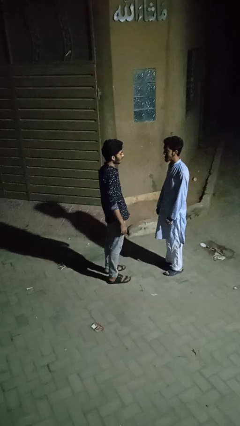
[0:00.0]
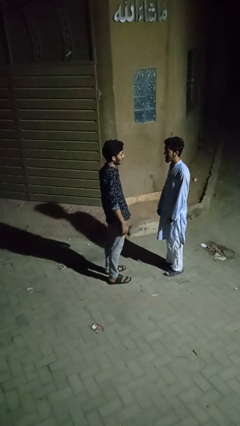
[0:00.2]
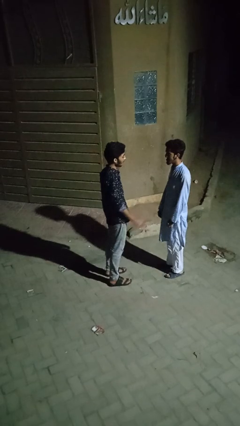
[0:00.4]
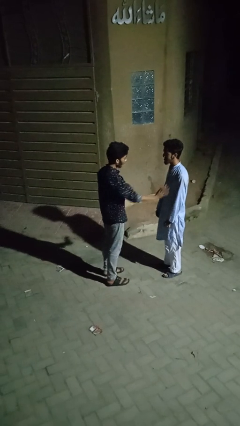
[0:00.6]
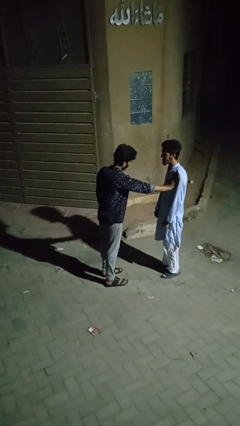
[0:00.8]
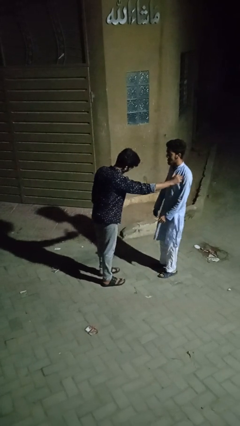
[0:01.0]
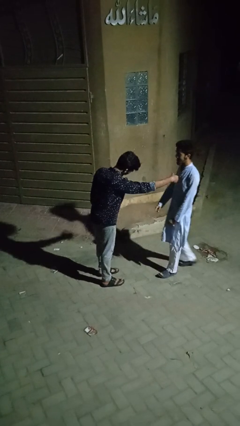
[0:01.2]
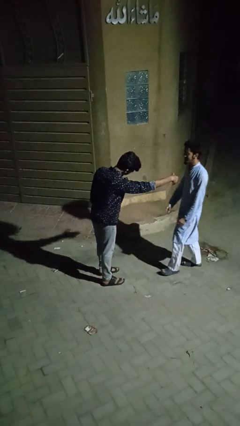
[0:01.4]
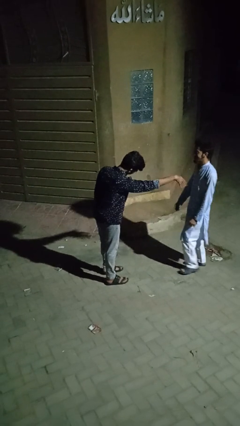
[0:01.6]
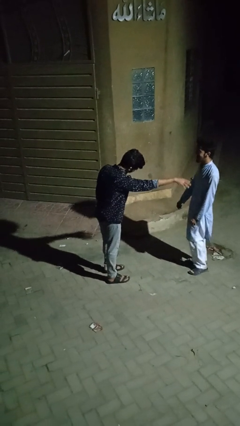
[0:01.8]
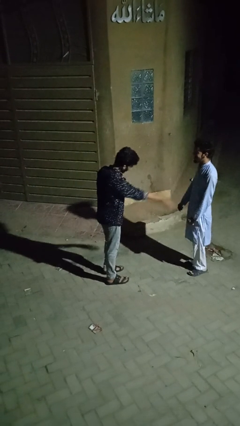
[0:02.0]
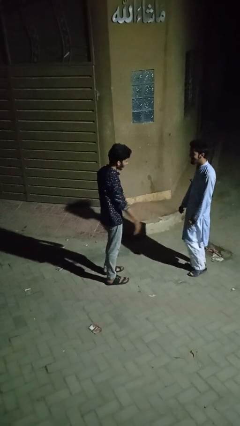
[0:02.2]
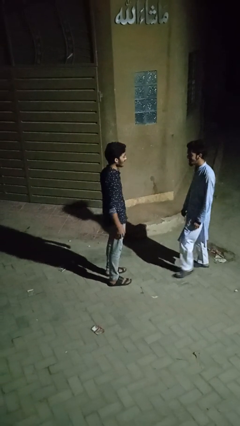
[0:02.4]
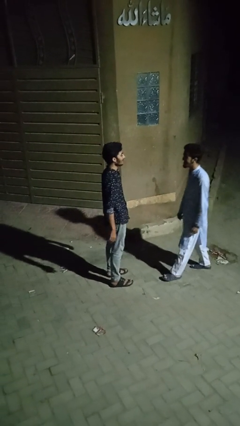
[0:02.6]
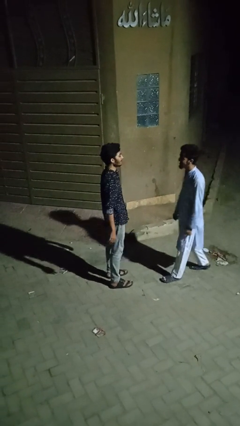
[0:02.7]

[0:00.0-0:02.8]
person shoves person

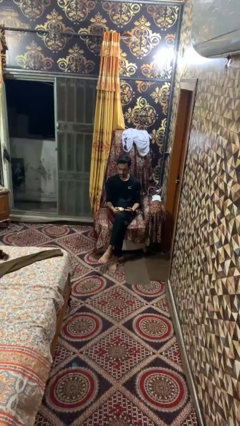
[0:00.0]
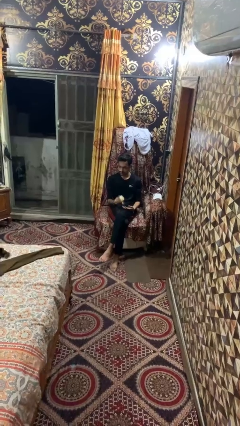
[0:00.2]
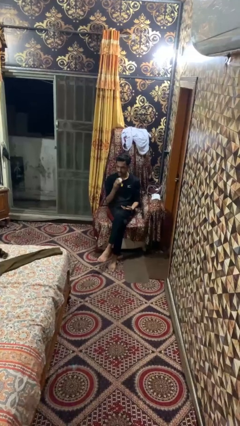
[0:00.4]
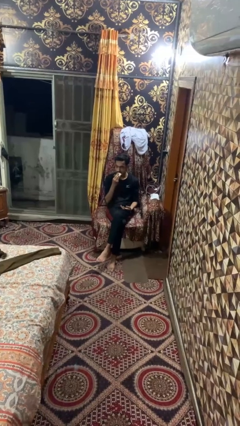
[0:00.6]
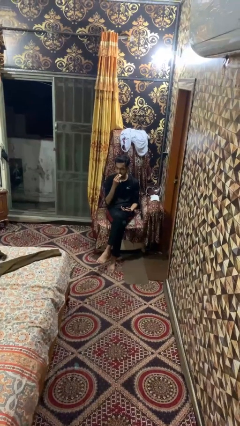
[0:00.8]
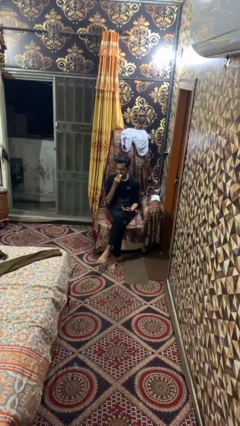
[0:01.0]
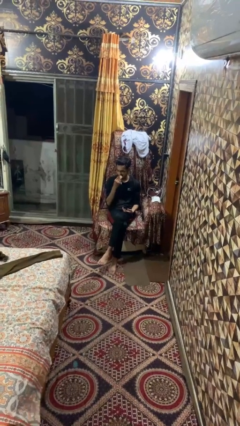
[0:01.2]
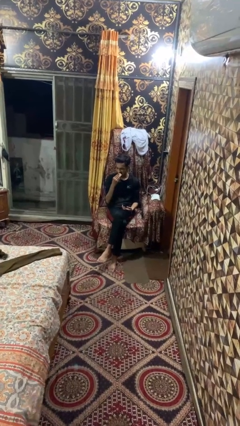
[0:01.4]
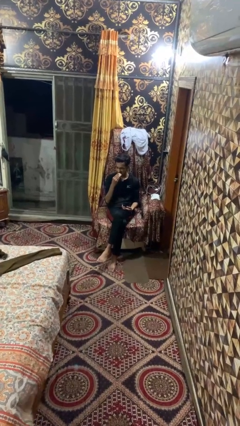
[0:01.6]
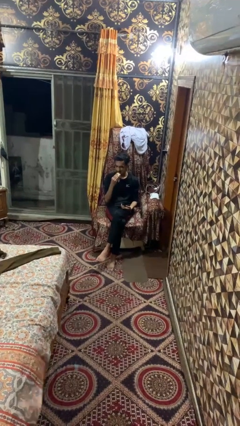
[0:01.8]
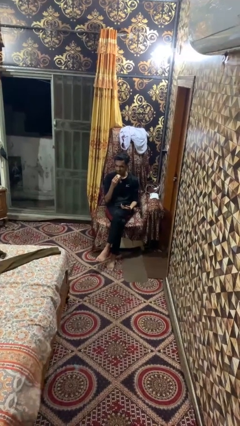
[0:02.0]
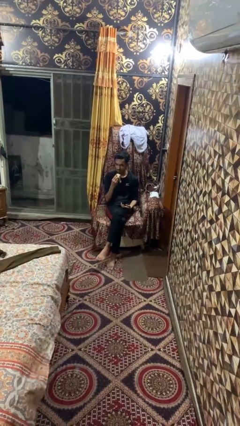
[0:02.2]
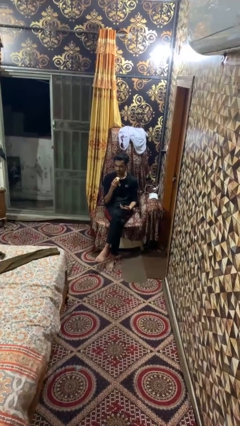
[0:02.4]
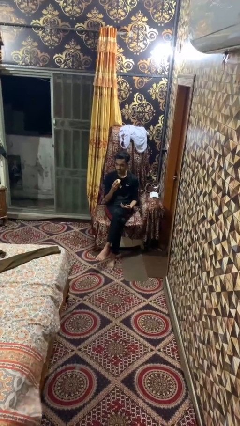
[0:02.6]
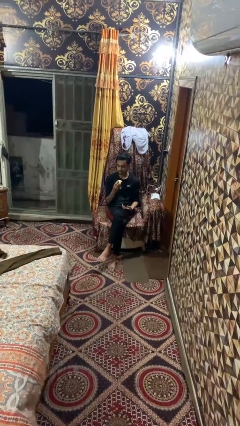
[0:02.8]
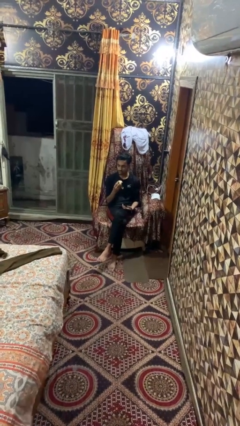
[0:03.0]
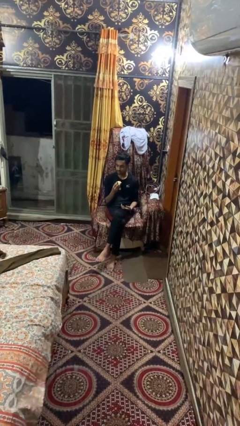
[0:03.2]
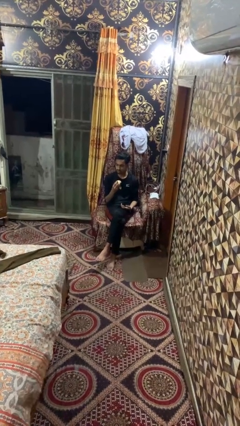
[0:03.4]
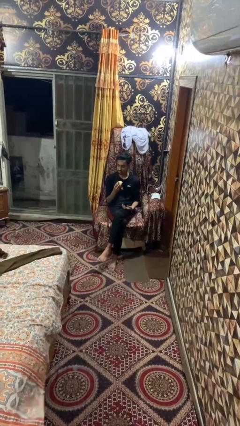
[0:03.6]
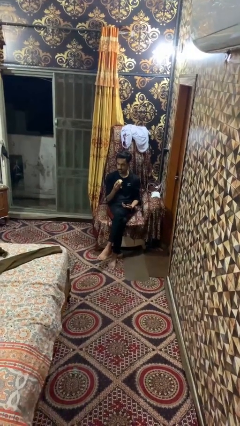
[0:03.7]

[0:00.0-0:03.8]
person eats banana

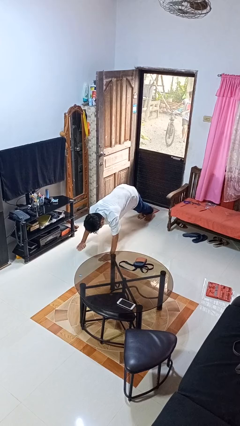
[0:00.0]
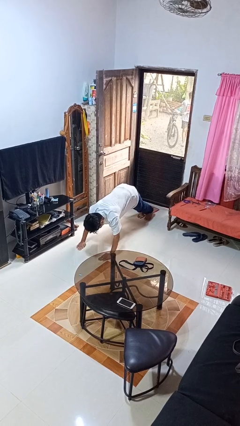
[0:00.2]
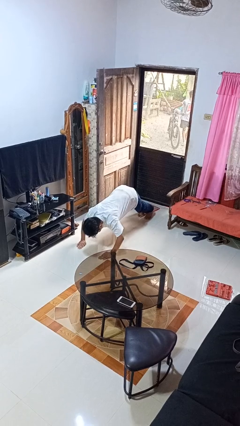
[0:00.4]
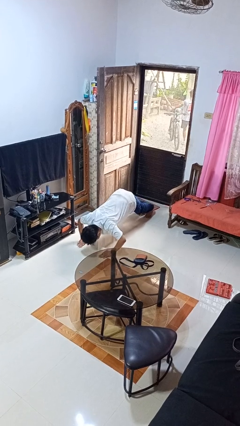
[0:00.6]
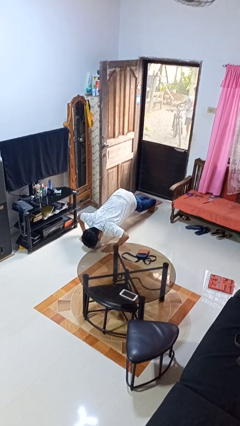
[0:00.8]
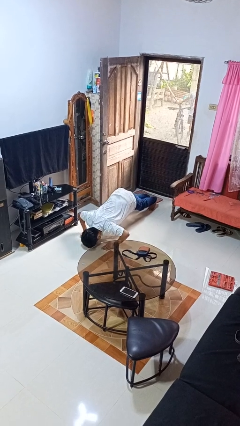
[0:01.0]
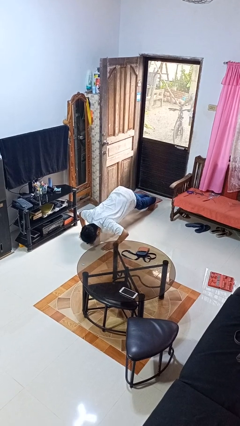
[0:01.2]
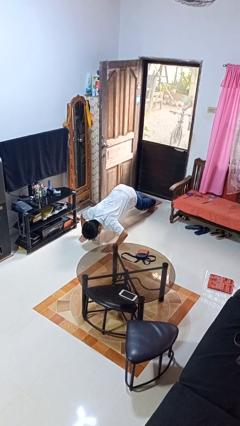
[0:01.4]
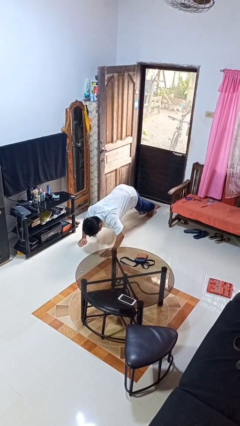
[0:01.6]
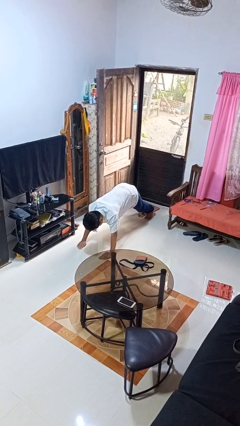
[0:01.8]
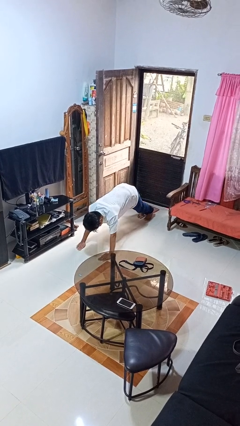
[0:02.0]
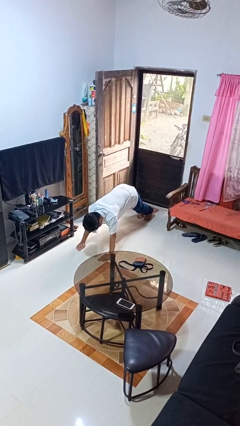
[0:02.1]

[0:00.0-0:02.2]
person exercises with pushup

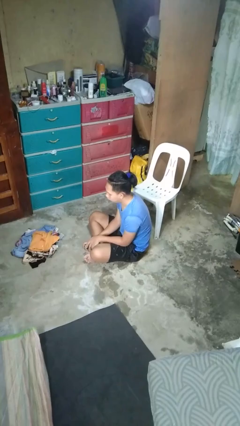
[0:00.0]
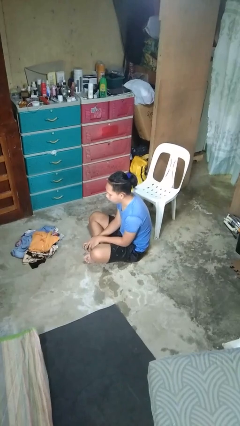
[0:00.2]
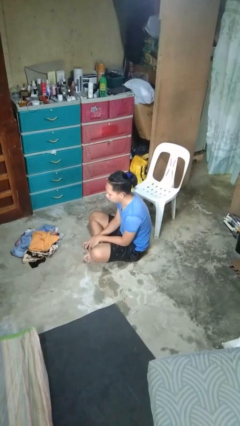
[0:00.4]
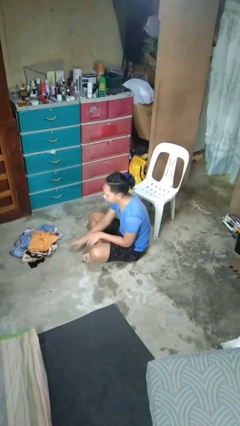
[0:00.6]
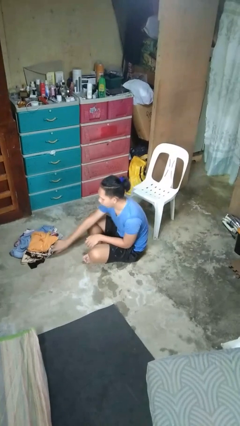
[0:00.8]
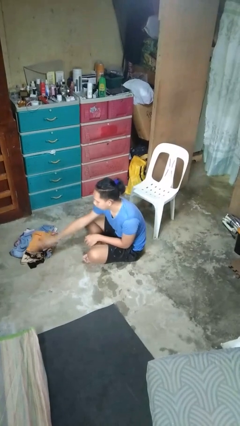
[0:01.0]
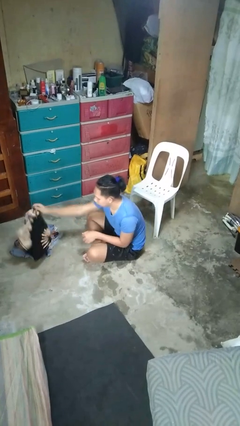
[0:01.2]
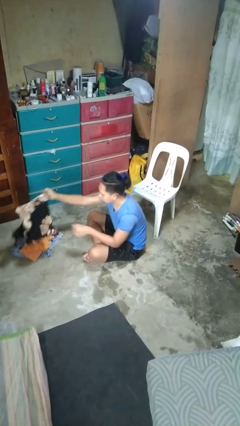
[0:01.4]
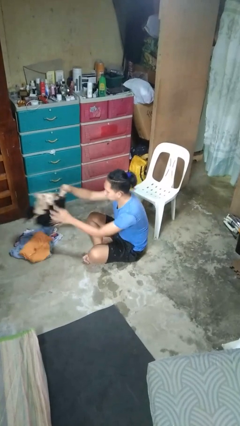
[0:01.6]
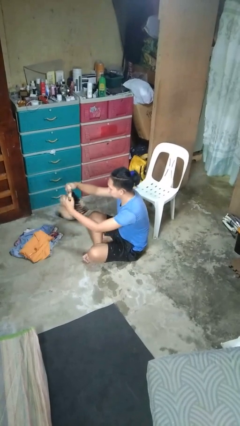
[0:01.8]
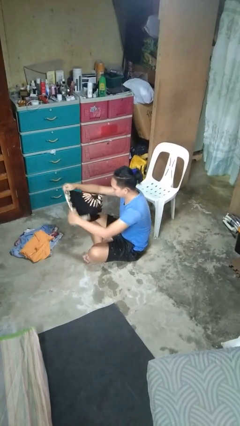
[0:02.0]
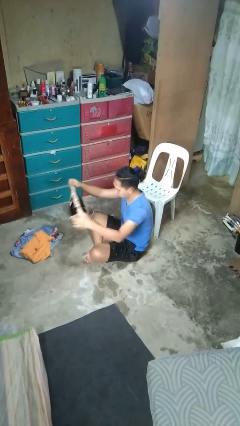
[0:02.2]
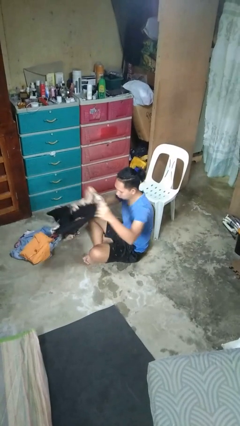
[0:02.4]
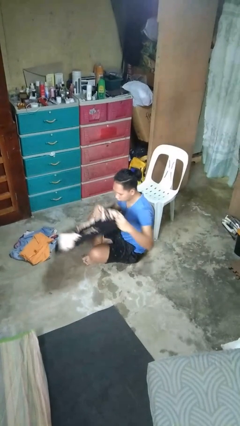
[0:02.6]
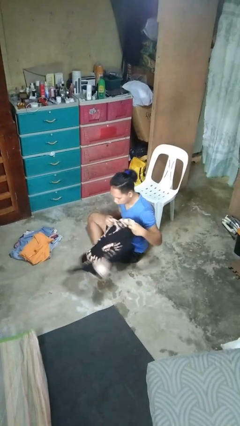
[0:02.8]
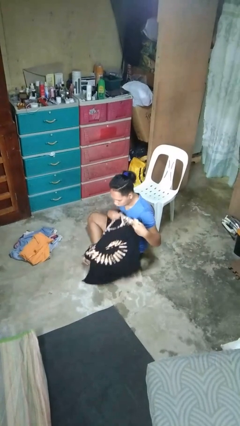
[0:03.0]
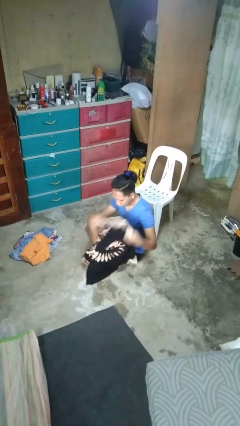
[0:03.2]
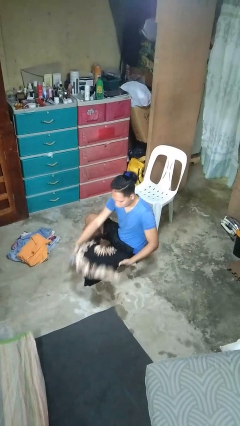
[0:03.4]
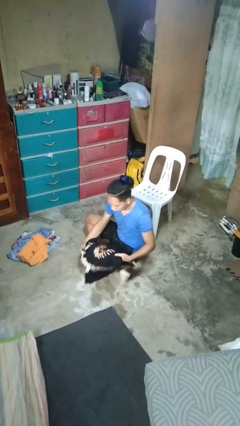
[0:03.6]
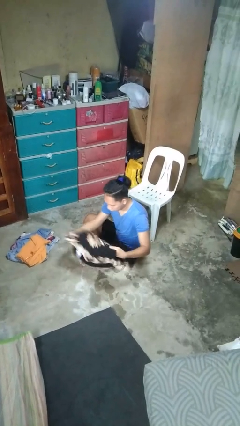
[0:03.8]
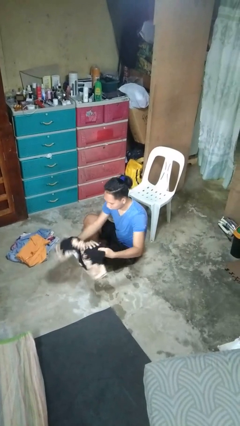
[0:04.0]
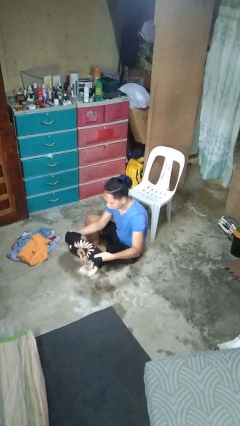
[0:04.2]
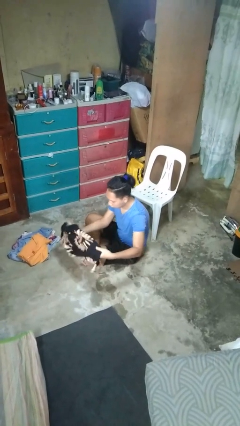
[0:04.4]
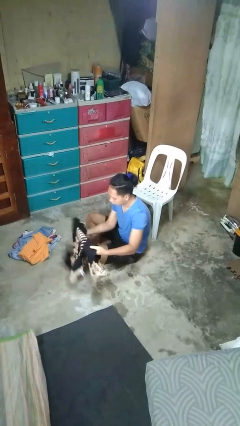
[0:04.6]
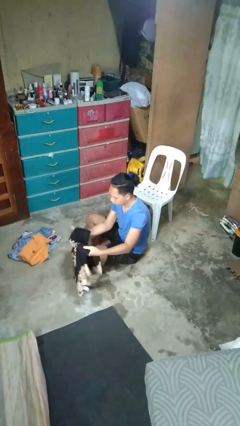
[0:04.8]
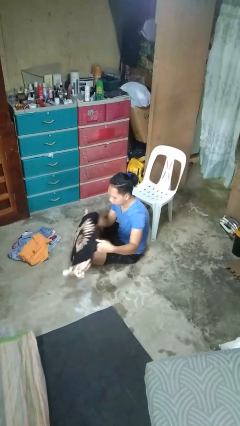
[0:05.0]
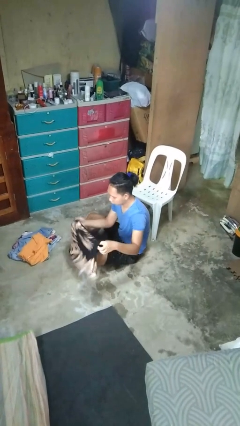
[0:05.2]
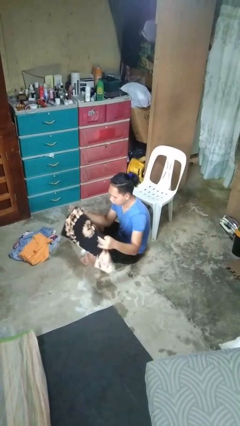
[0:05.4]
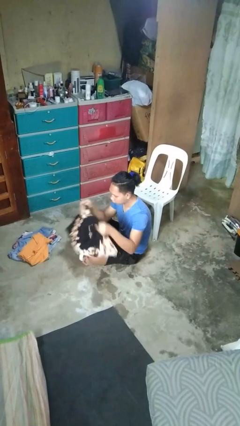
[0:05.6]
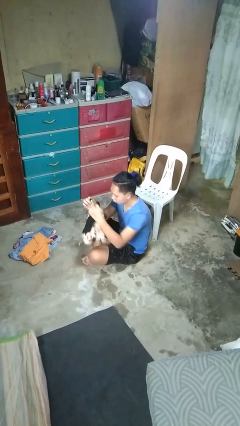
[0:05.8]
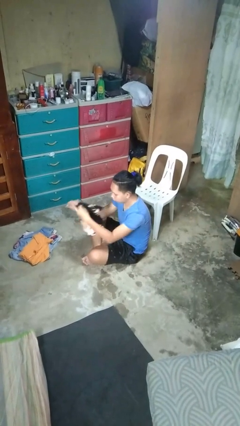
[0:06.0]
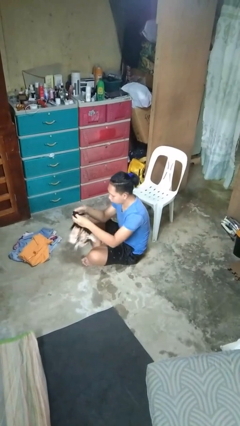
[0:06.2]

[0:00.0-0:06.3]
person folds shirt

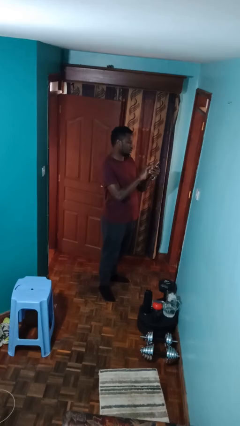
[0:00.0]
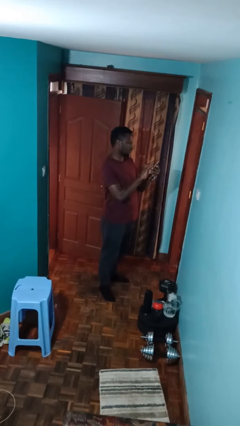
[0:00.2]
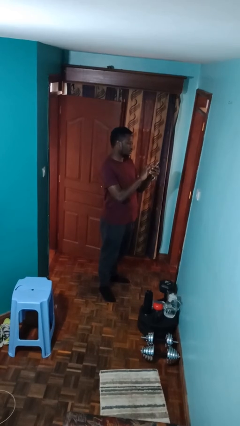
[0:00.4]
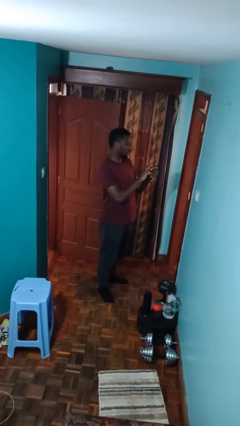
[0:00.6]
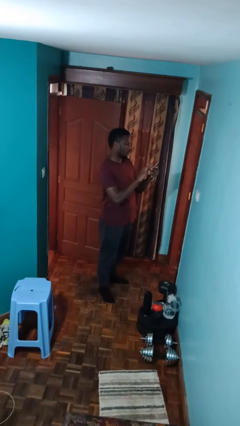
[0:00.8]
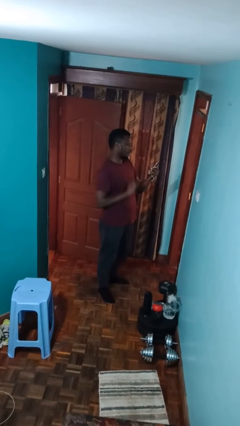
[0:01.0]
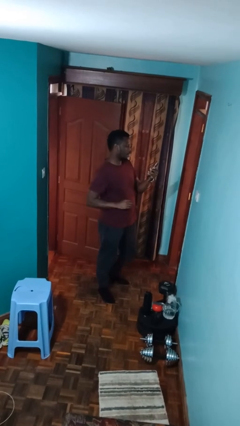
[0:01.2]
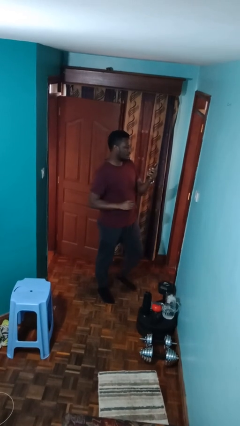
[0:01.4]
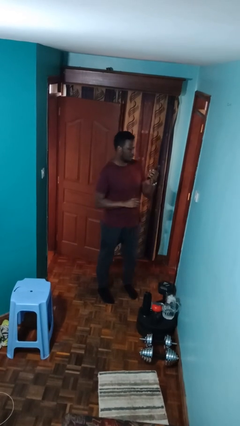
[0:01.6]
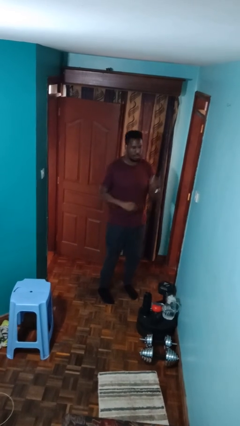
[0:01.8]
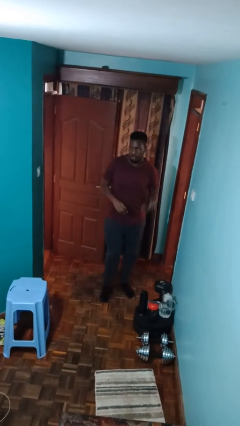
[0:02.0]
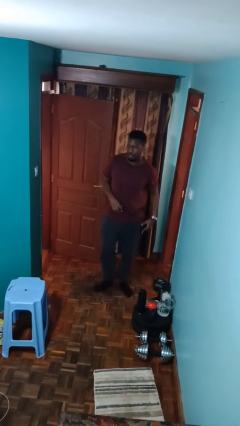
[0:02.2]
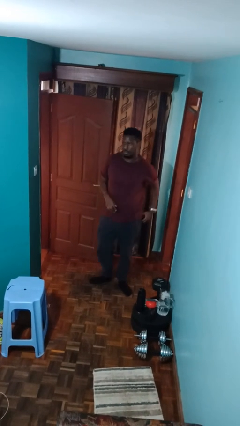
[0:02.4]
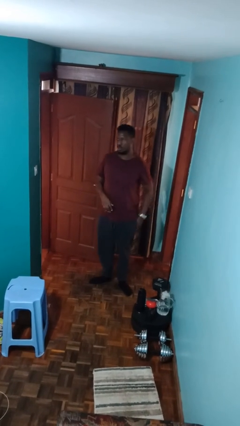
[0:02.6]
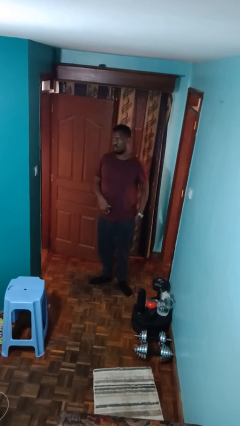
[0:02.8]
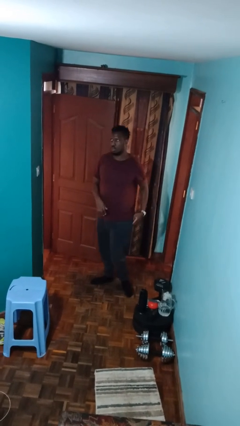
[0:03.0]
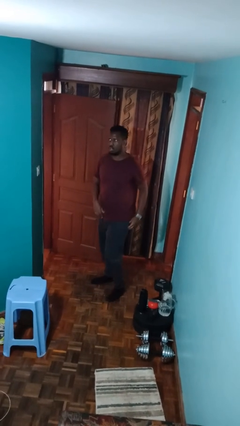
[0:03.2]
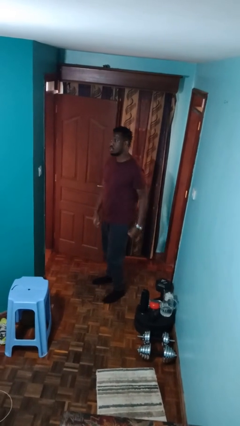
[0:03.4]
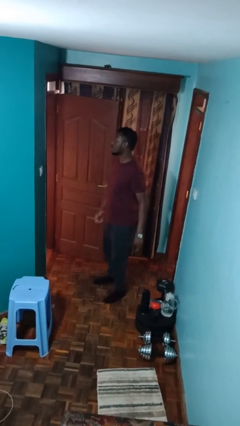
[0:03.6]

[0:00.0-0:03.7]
person puts phone into pocket
